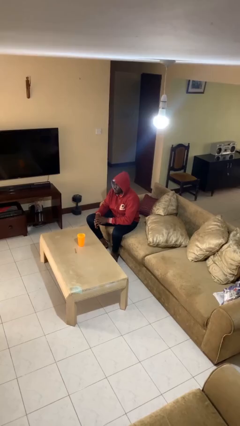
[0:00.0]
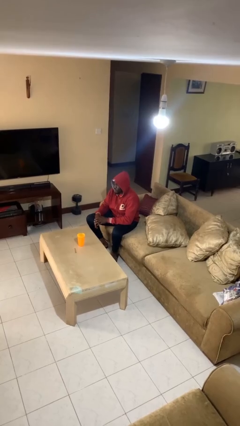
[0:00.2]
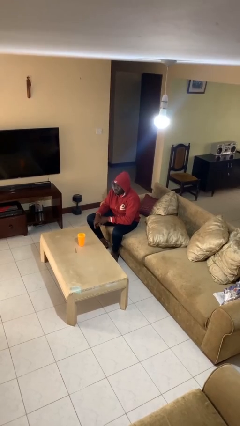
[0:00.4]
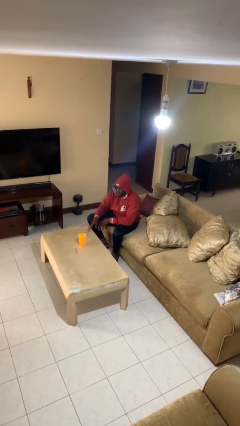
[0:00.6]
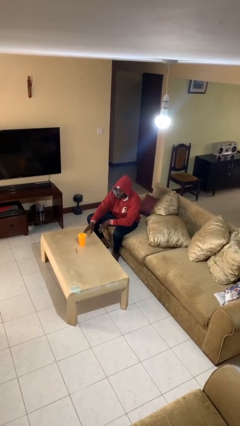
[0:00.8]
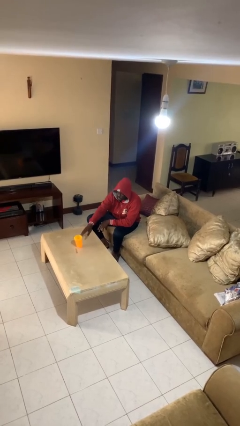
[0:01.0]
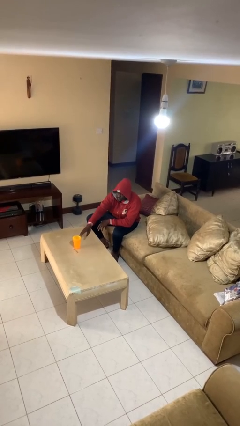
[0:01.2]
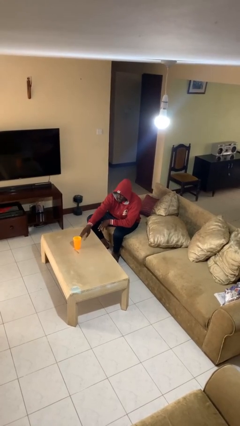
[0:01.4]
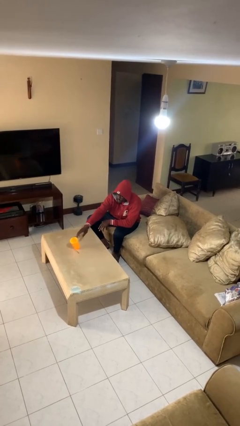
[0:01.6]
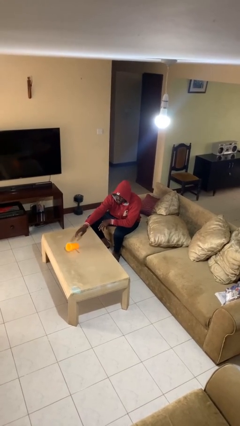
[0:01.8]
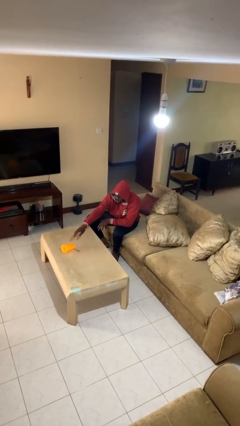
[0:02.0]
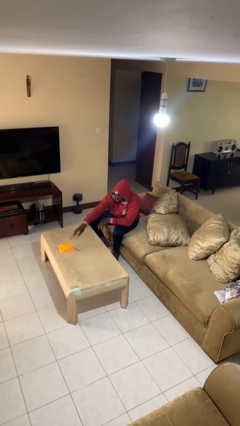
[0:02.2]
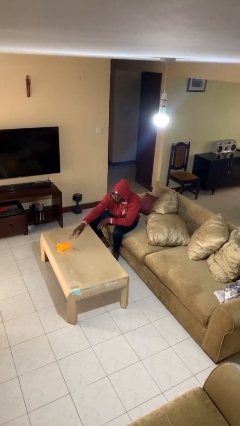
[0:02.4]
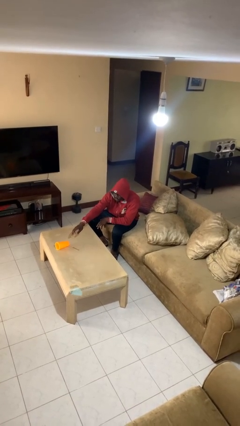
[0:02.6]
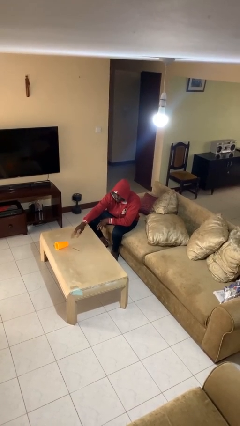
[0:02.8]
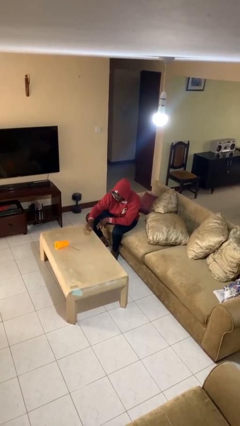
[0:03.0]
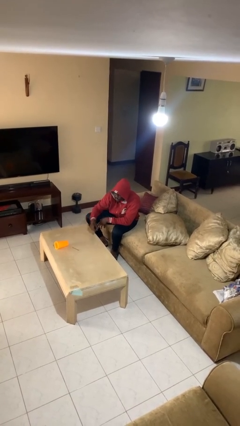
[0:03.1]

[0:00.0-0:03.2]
person knocks over glass

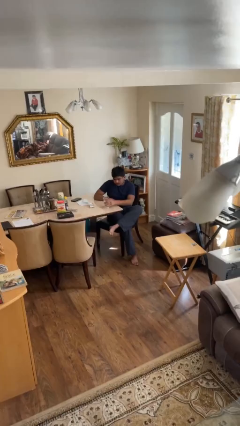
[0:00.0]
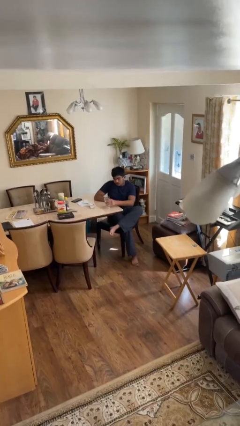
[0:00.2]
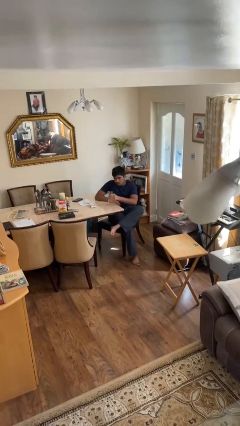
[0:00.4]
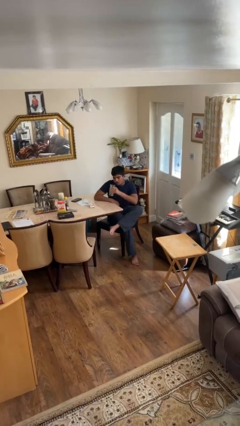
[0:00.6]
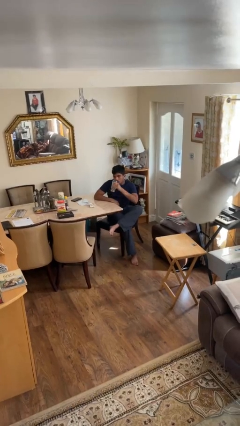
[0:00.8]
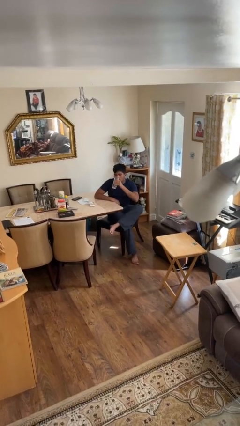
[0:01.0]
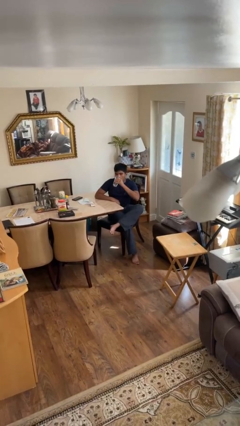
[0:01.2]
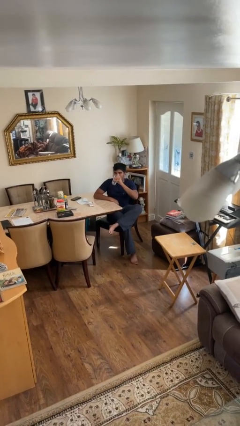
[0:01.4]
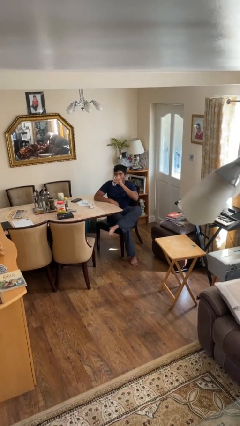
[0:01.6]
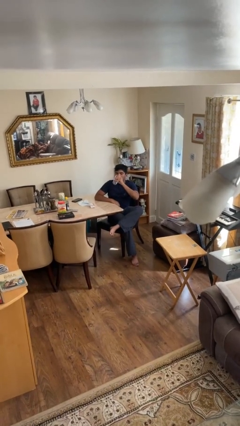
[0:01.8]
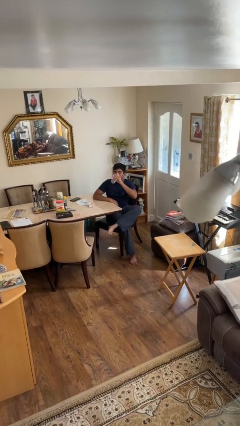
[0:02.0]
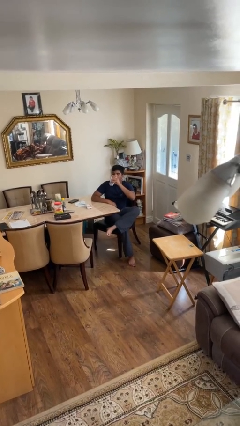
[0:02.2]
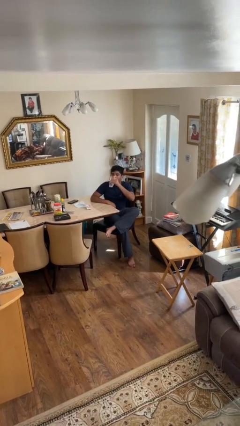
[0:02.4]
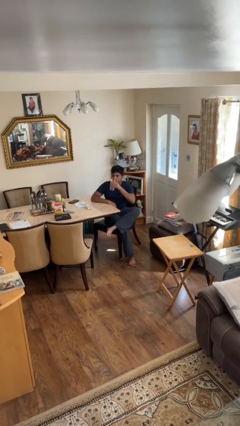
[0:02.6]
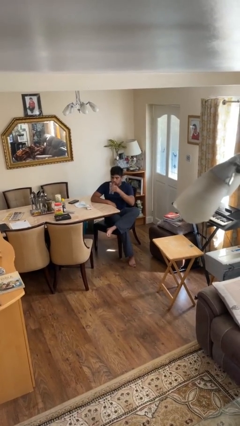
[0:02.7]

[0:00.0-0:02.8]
person drinks from cup

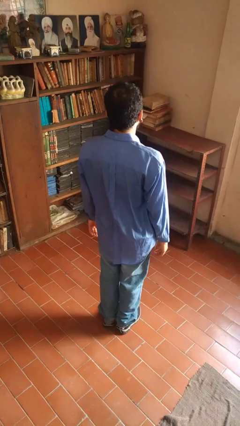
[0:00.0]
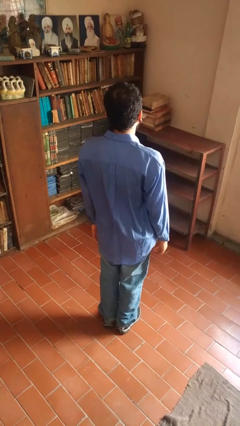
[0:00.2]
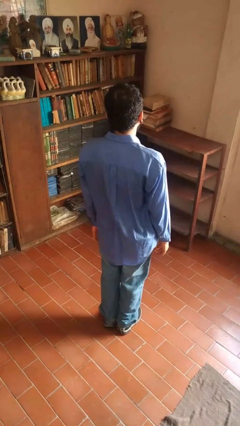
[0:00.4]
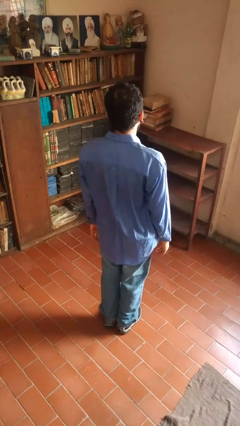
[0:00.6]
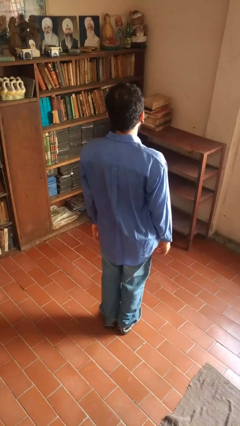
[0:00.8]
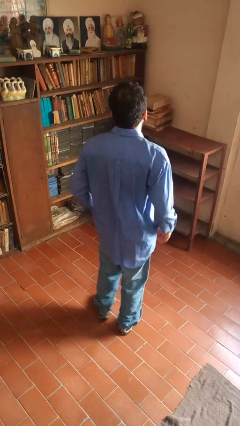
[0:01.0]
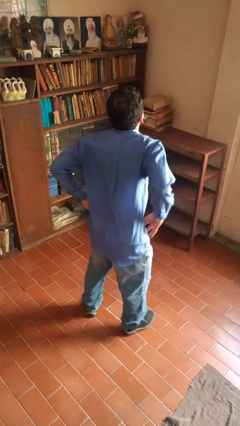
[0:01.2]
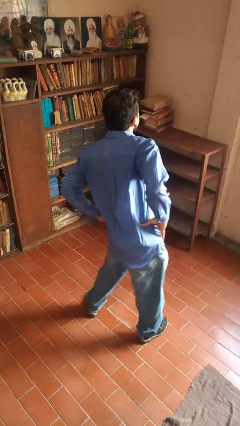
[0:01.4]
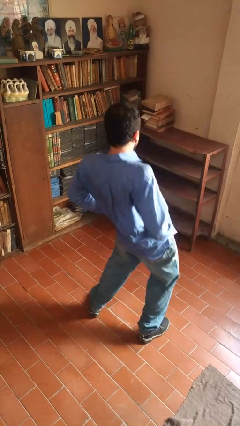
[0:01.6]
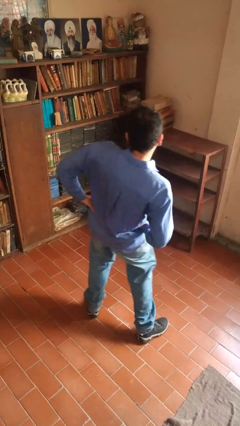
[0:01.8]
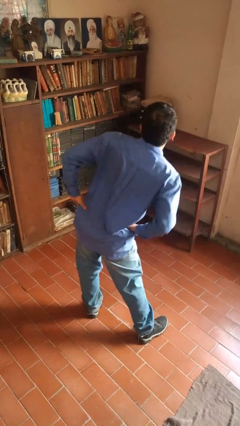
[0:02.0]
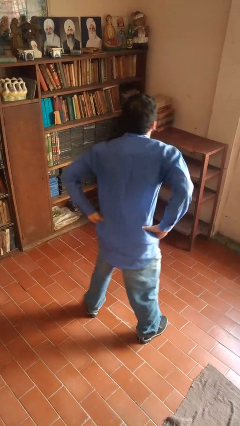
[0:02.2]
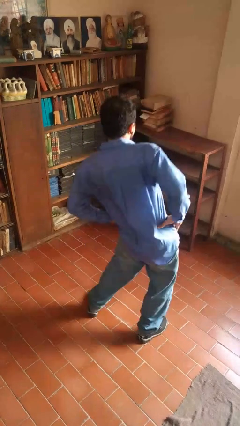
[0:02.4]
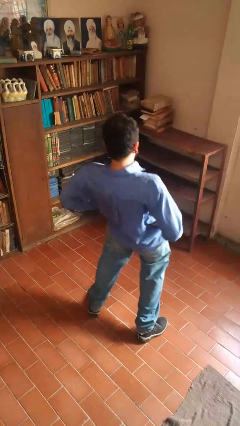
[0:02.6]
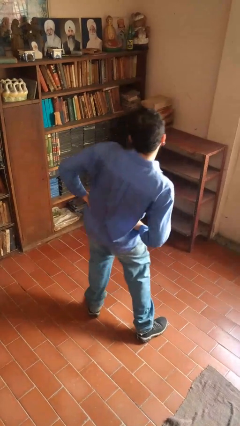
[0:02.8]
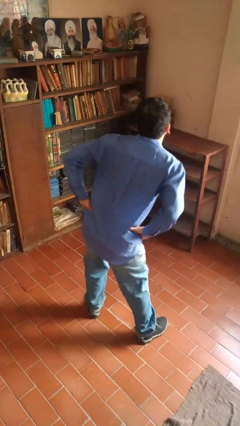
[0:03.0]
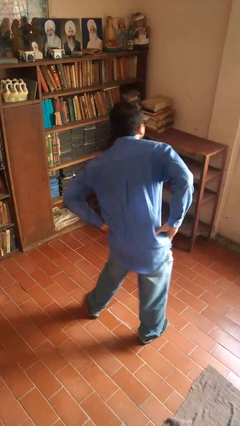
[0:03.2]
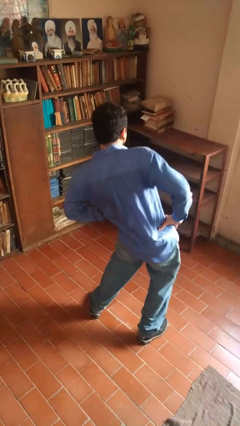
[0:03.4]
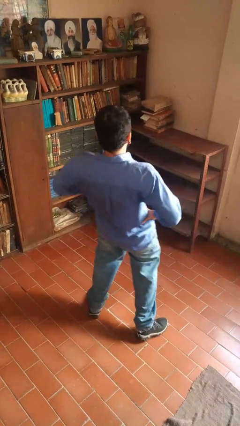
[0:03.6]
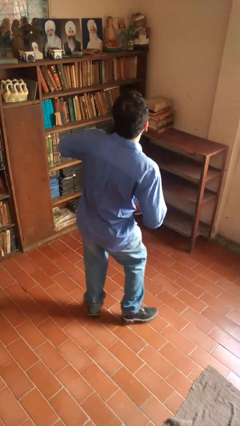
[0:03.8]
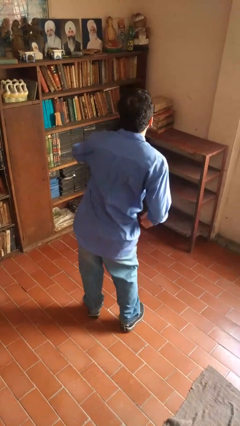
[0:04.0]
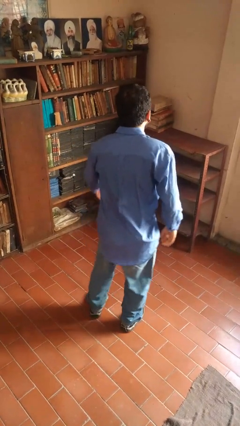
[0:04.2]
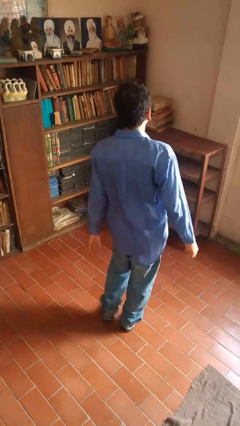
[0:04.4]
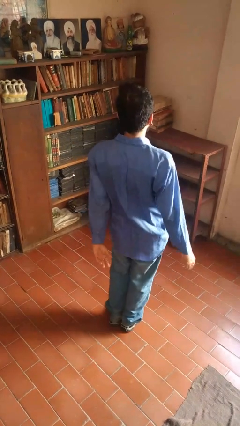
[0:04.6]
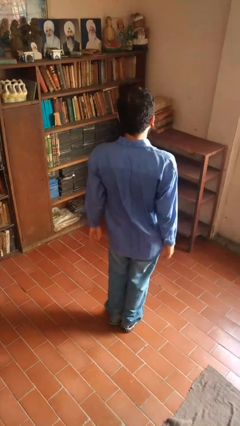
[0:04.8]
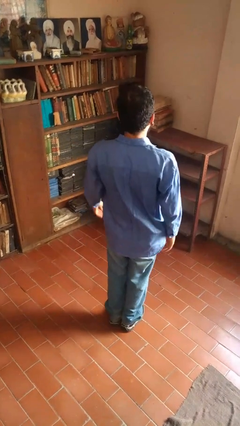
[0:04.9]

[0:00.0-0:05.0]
person wiggles hips

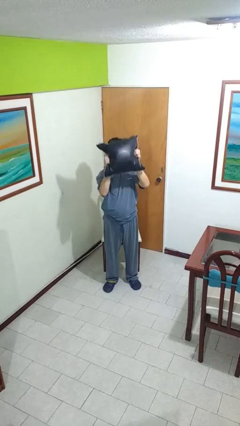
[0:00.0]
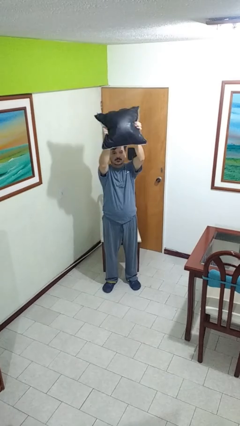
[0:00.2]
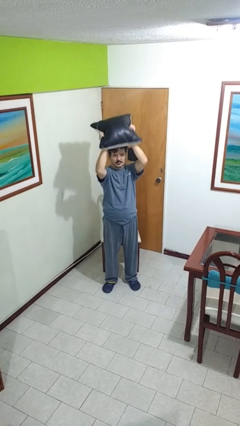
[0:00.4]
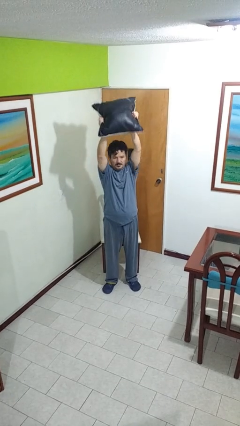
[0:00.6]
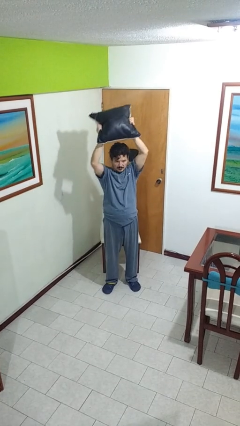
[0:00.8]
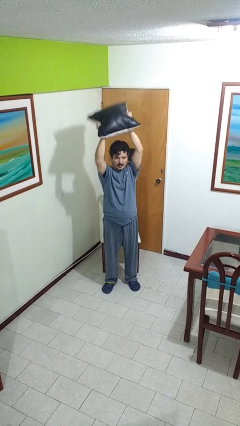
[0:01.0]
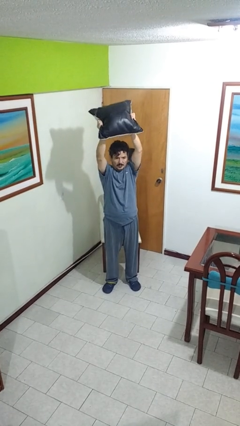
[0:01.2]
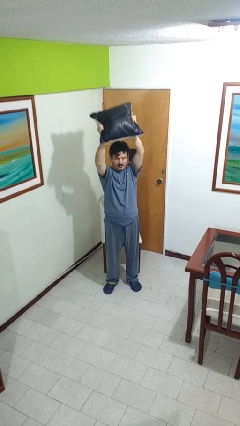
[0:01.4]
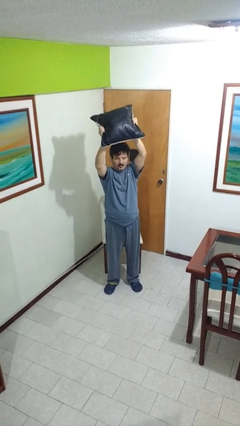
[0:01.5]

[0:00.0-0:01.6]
person holds object above head

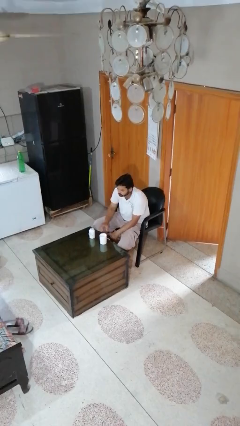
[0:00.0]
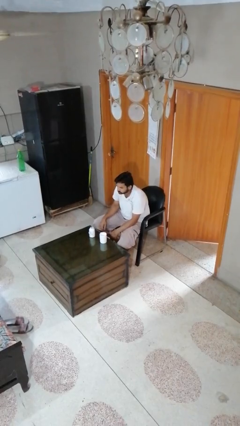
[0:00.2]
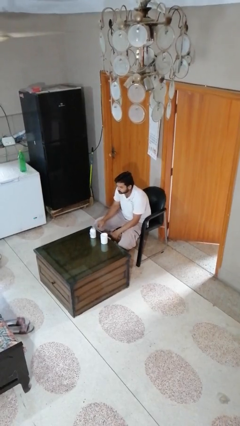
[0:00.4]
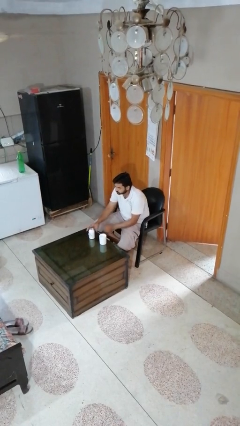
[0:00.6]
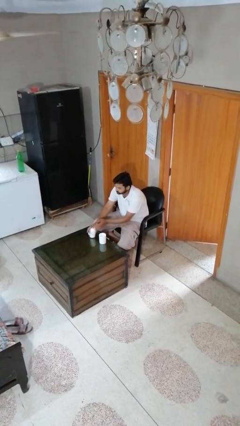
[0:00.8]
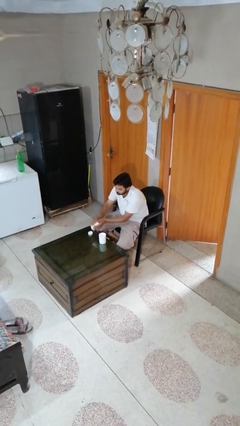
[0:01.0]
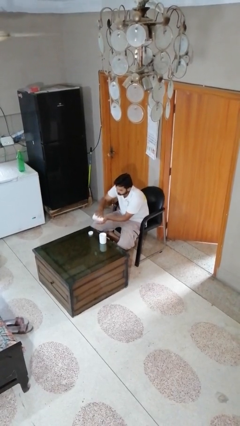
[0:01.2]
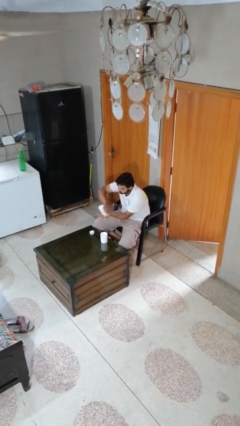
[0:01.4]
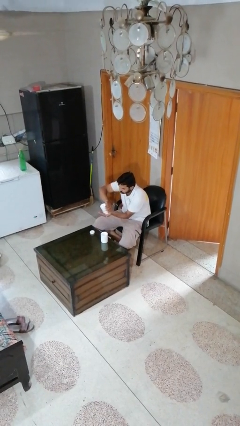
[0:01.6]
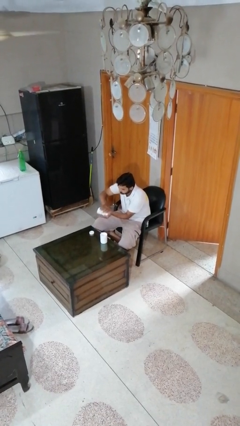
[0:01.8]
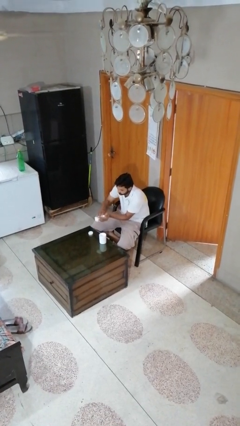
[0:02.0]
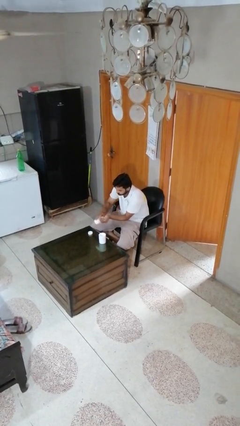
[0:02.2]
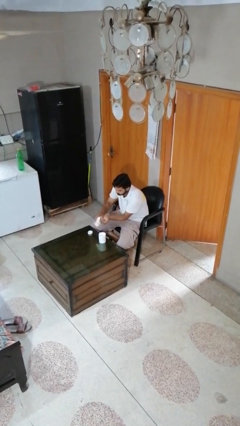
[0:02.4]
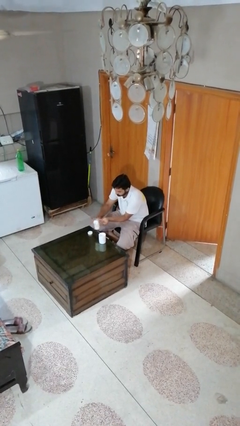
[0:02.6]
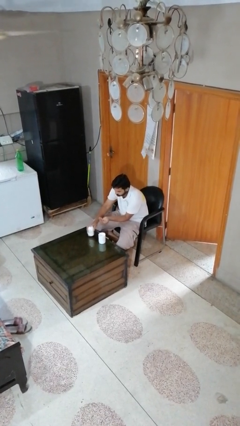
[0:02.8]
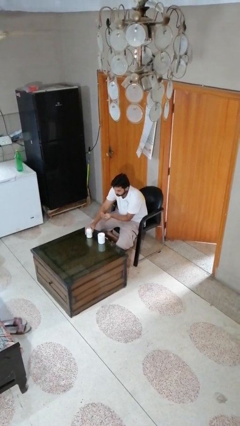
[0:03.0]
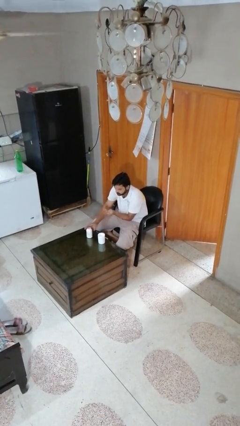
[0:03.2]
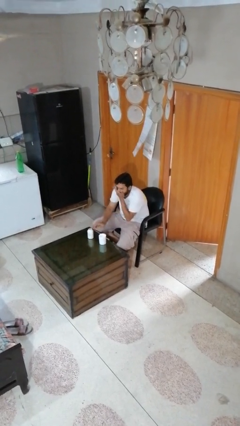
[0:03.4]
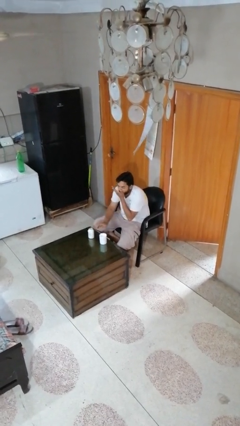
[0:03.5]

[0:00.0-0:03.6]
person takes medicine pills

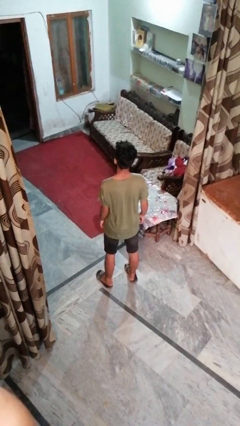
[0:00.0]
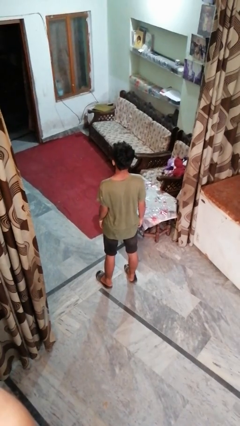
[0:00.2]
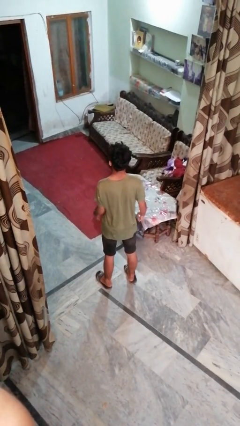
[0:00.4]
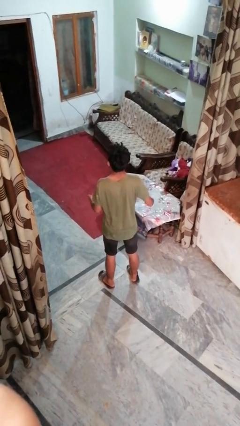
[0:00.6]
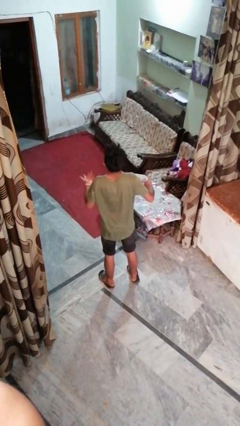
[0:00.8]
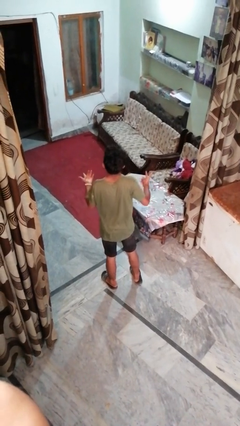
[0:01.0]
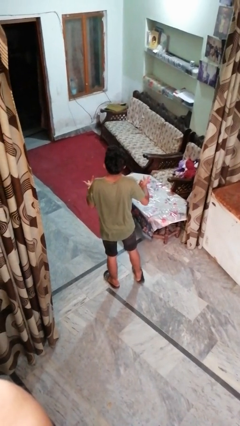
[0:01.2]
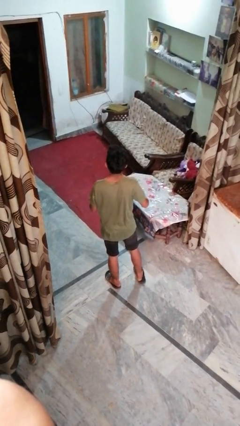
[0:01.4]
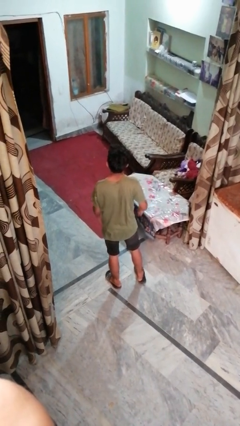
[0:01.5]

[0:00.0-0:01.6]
person shrugs
